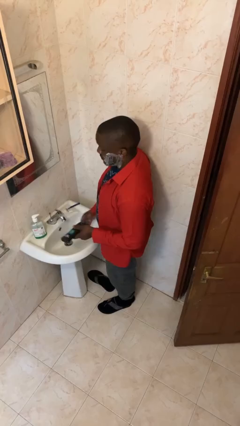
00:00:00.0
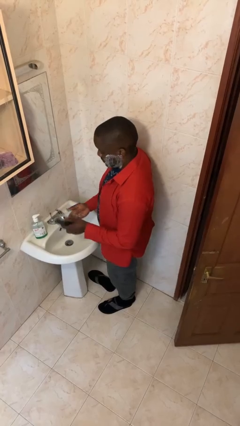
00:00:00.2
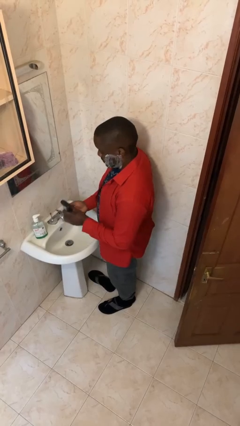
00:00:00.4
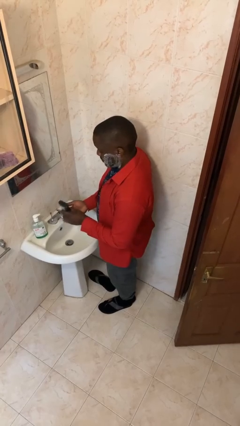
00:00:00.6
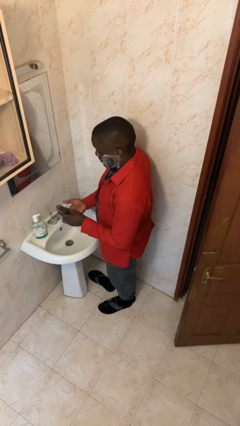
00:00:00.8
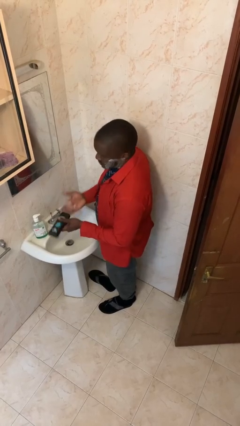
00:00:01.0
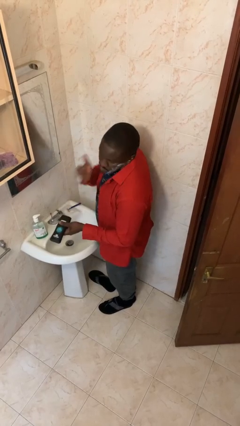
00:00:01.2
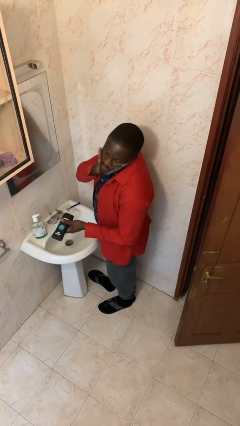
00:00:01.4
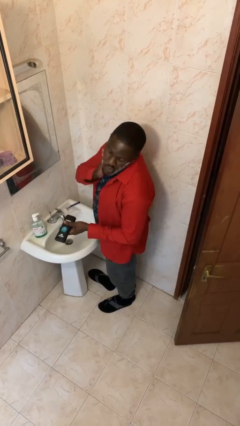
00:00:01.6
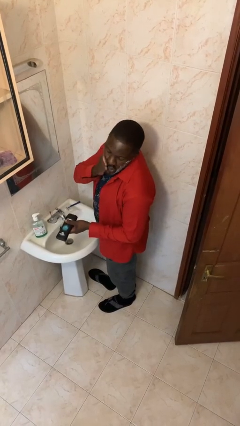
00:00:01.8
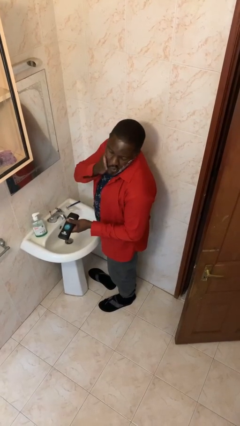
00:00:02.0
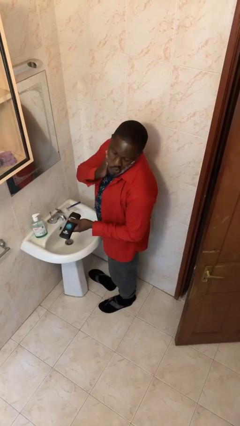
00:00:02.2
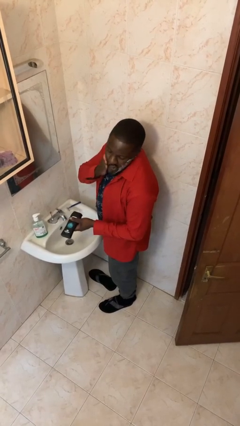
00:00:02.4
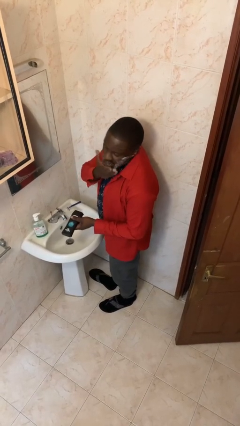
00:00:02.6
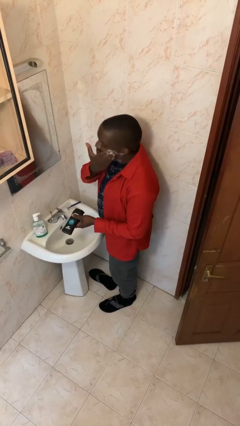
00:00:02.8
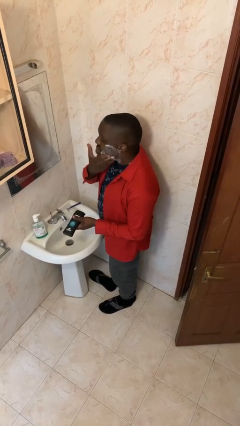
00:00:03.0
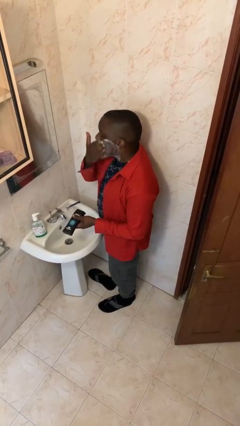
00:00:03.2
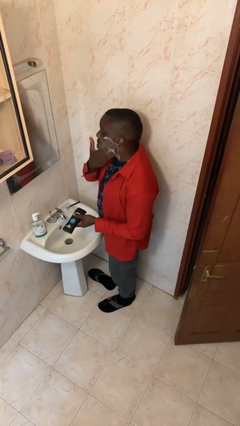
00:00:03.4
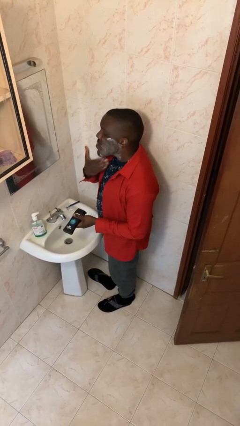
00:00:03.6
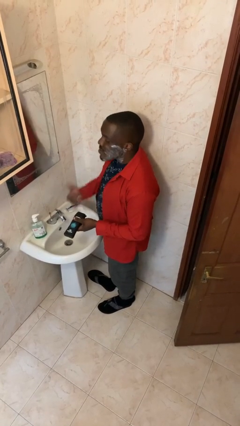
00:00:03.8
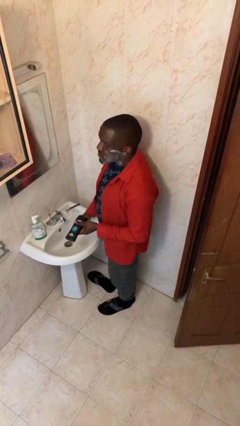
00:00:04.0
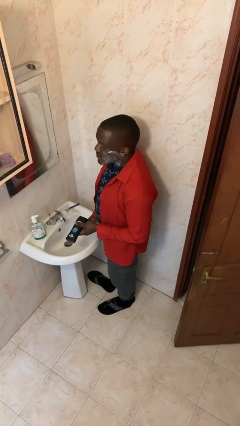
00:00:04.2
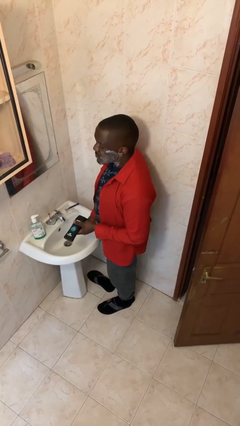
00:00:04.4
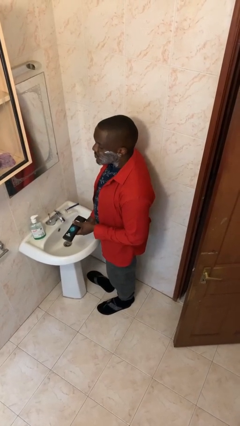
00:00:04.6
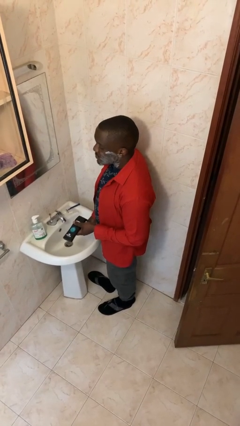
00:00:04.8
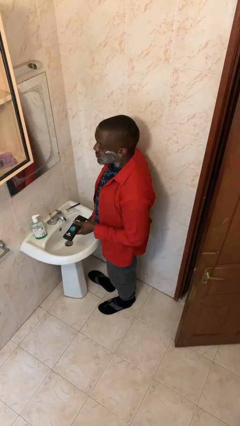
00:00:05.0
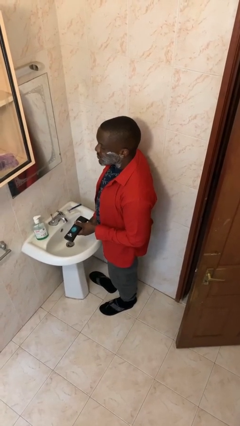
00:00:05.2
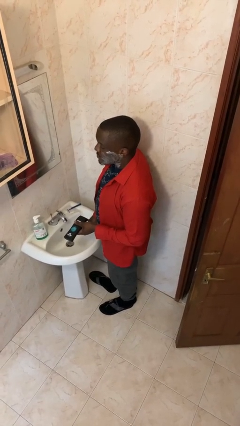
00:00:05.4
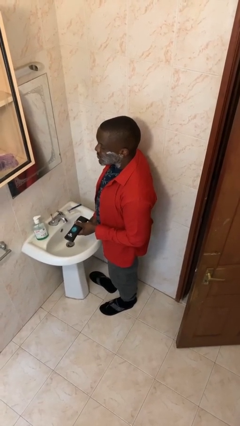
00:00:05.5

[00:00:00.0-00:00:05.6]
person applies shaving cream

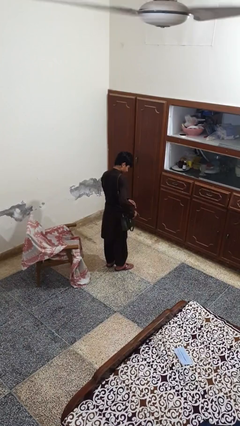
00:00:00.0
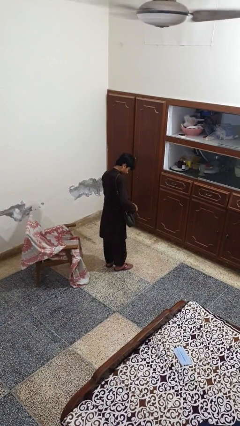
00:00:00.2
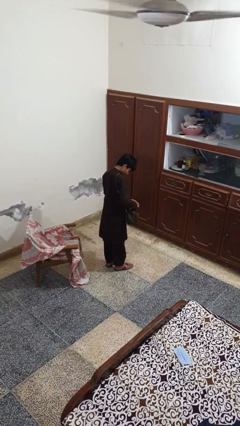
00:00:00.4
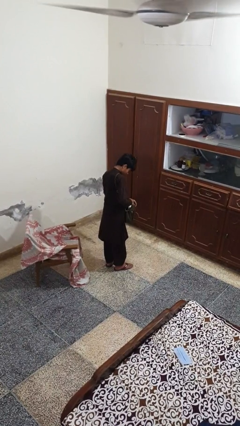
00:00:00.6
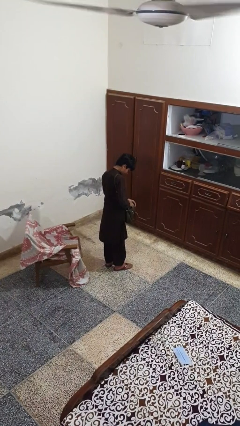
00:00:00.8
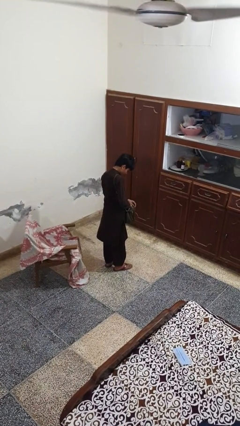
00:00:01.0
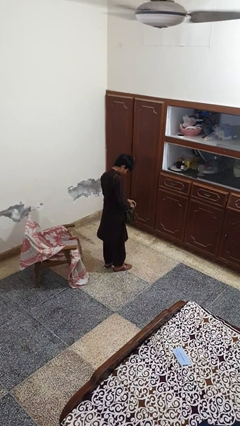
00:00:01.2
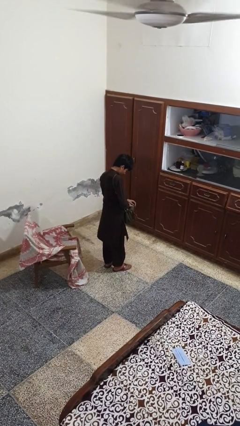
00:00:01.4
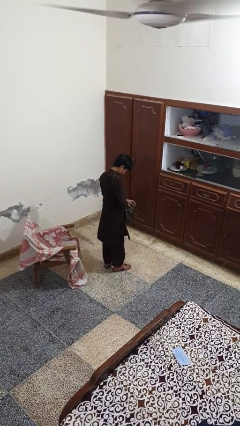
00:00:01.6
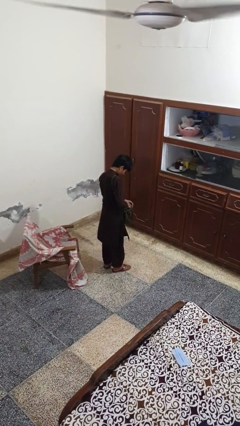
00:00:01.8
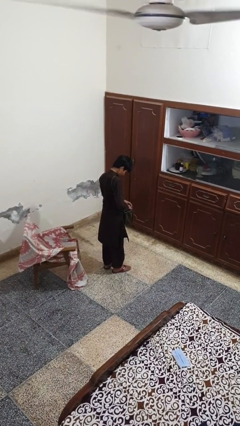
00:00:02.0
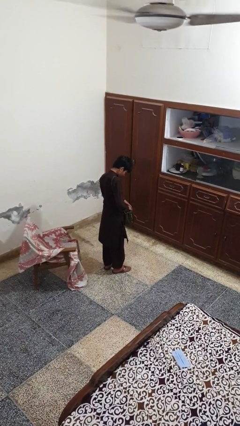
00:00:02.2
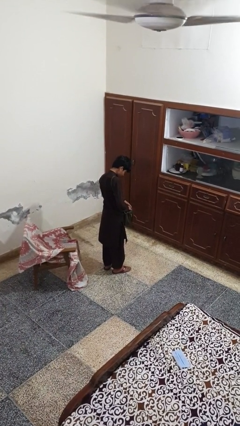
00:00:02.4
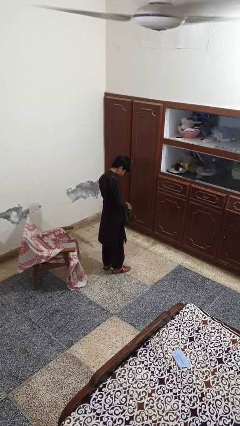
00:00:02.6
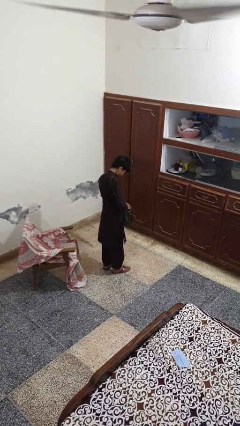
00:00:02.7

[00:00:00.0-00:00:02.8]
person searches in purse

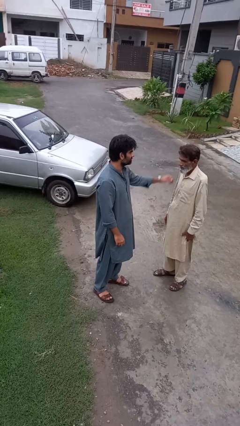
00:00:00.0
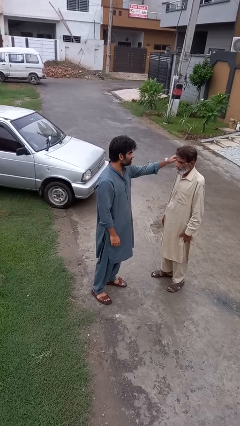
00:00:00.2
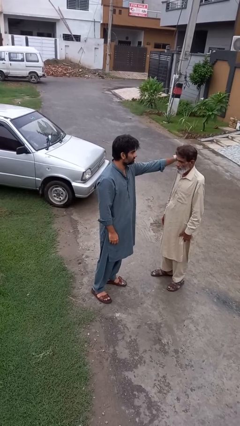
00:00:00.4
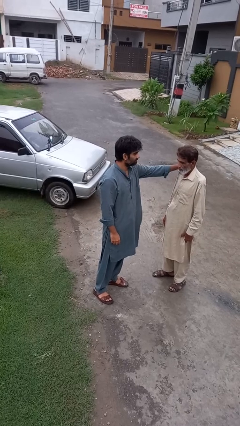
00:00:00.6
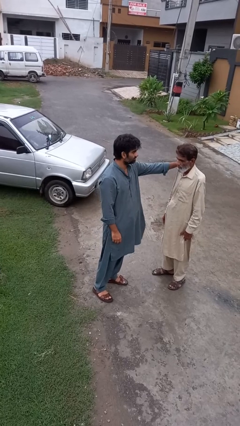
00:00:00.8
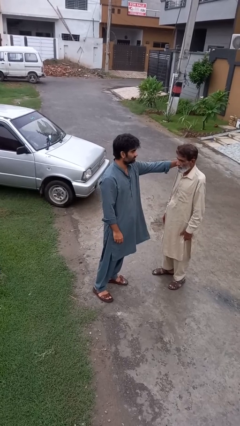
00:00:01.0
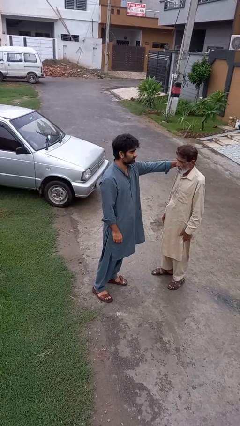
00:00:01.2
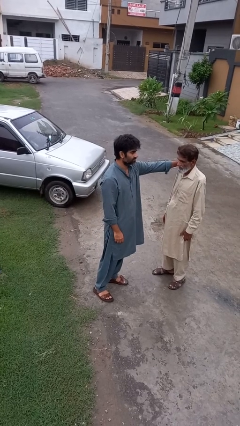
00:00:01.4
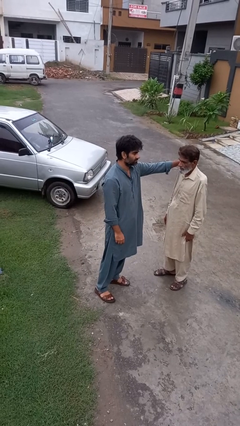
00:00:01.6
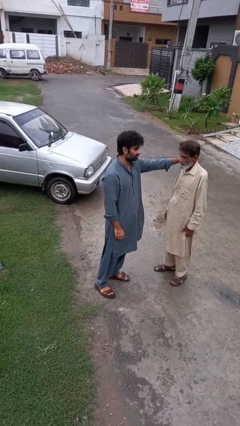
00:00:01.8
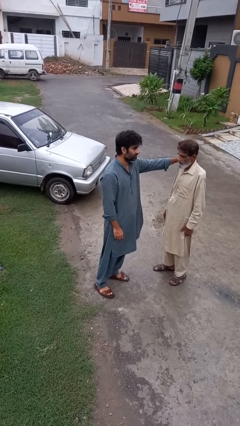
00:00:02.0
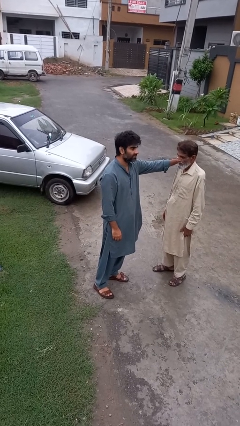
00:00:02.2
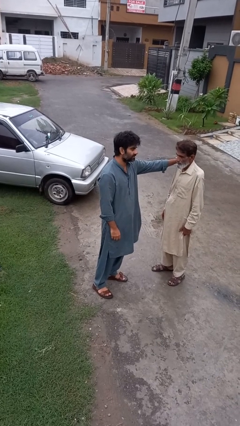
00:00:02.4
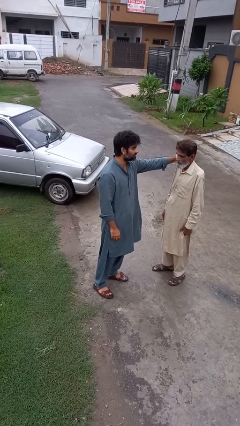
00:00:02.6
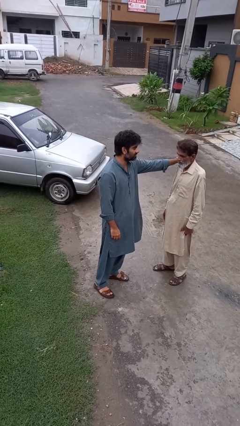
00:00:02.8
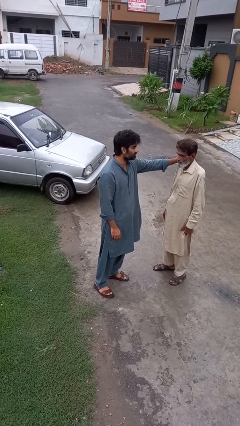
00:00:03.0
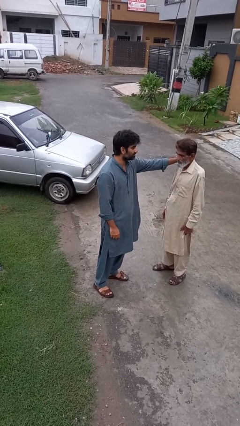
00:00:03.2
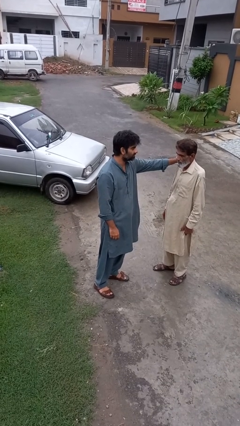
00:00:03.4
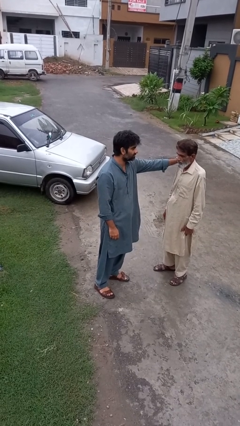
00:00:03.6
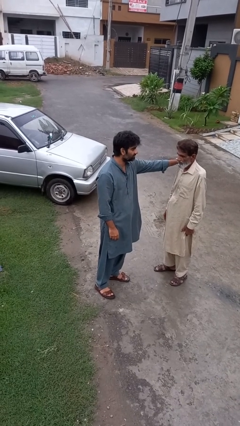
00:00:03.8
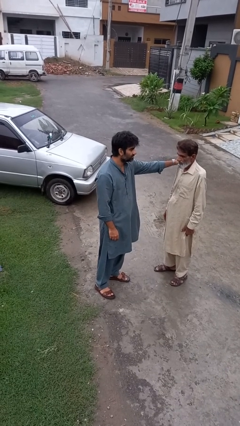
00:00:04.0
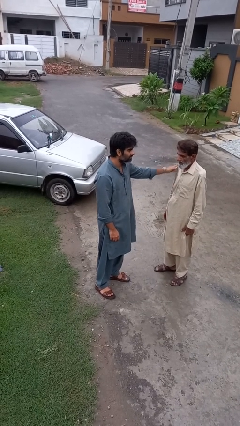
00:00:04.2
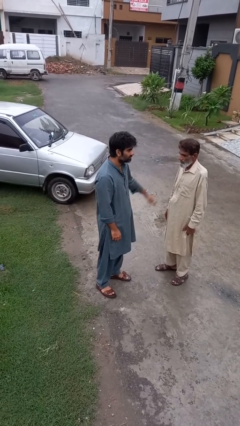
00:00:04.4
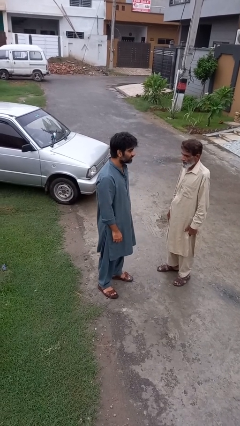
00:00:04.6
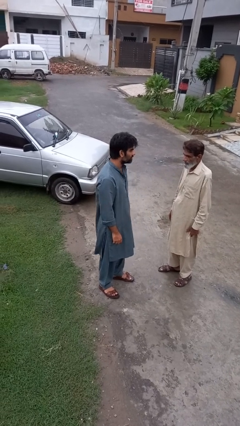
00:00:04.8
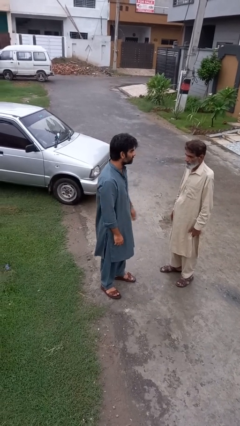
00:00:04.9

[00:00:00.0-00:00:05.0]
person pounds shoulders of person

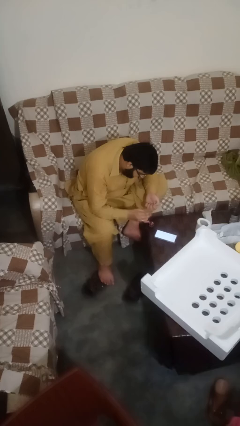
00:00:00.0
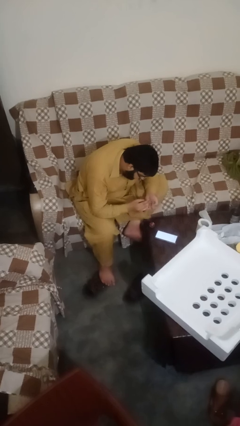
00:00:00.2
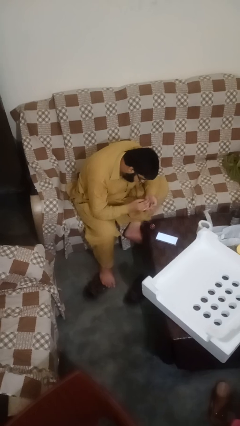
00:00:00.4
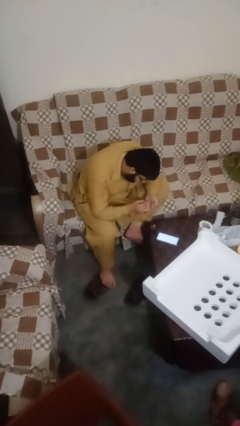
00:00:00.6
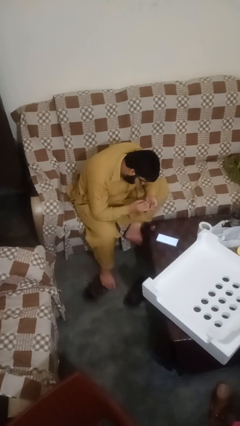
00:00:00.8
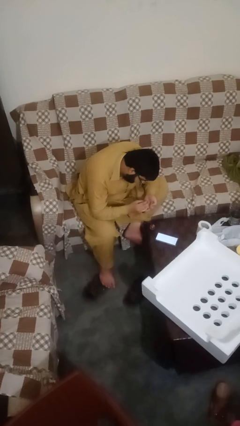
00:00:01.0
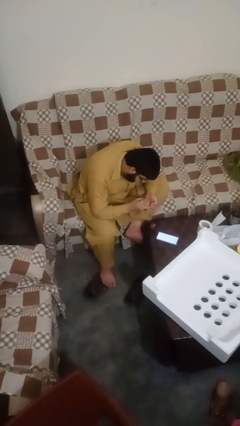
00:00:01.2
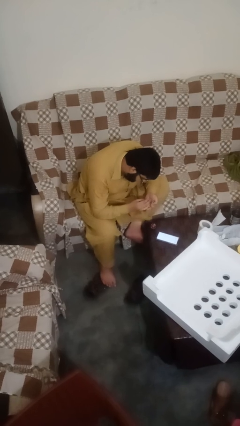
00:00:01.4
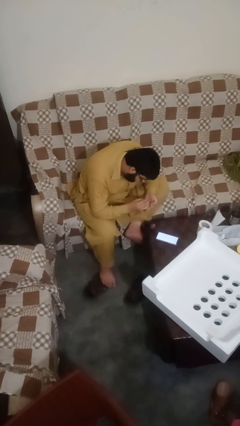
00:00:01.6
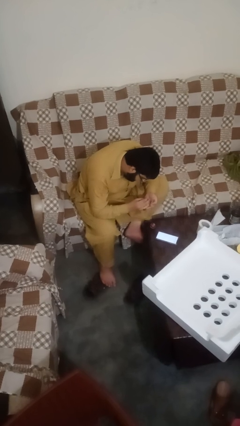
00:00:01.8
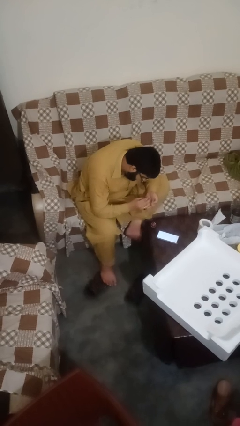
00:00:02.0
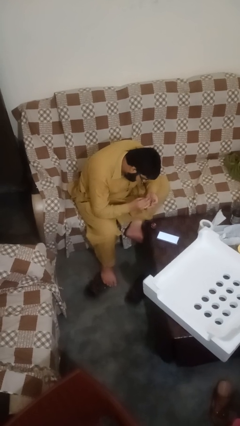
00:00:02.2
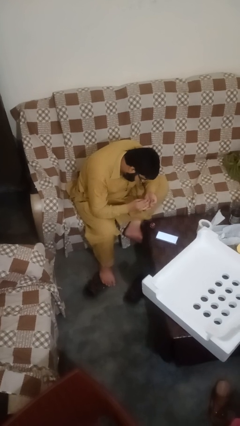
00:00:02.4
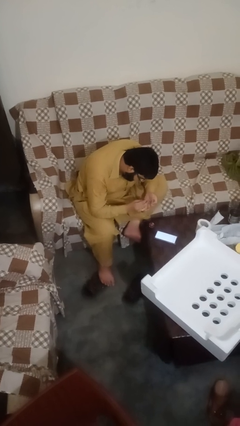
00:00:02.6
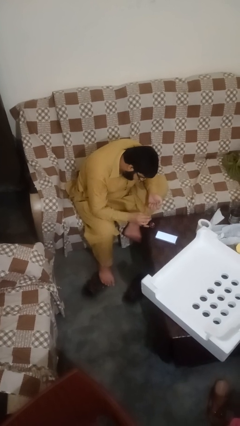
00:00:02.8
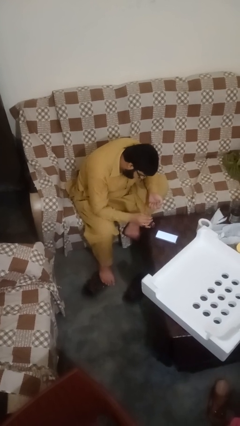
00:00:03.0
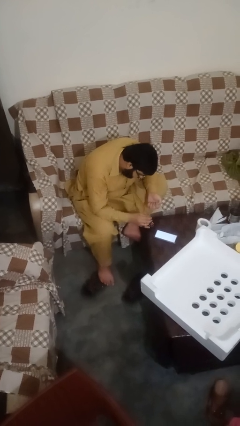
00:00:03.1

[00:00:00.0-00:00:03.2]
person paints fingernails

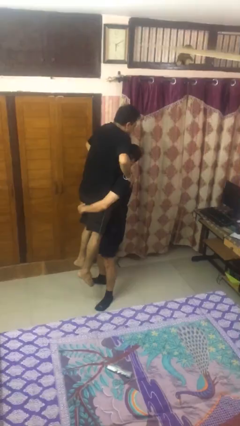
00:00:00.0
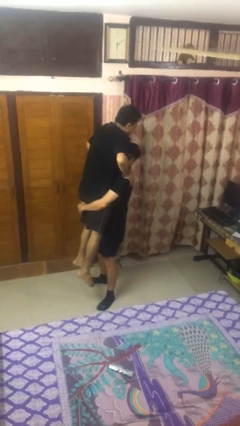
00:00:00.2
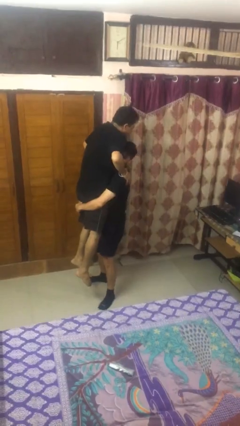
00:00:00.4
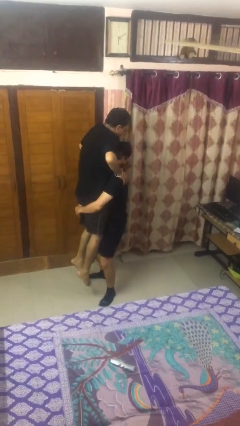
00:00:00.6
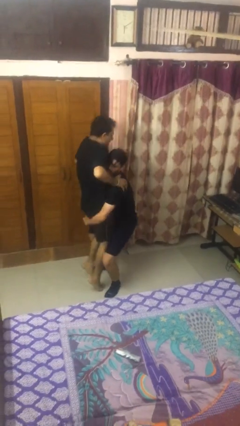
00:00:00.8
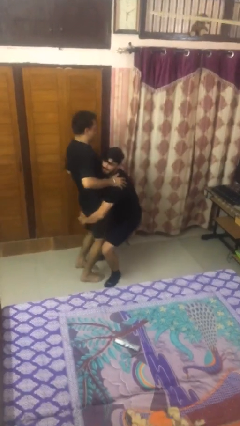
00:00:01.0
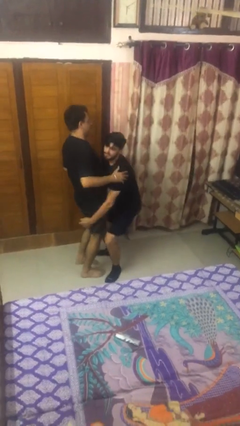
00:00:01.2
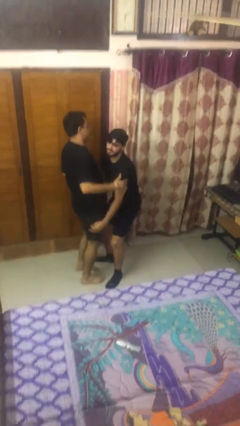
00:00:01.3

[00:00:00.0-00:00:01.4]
person puts down person
